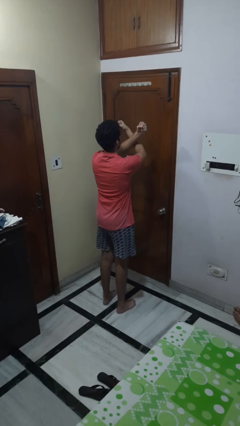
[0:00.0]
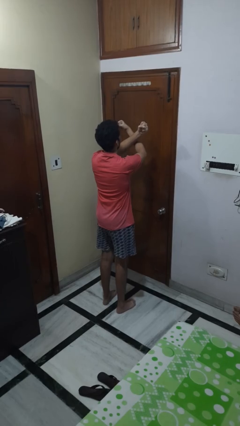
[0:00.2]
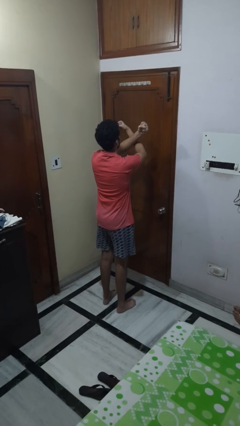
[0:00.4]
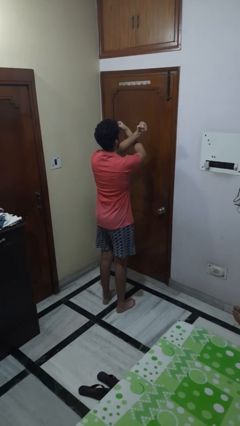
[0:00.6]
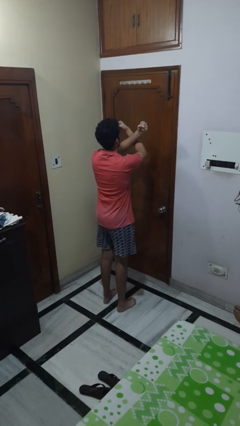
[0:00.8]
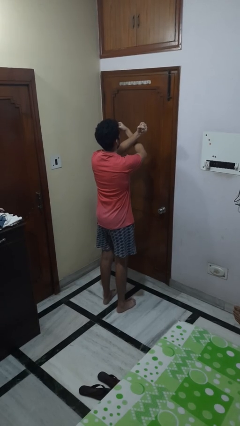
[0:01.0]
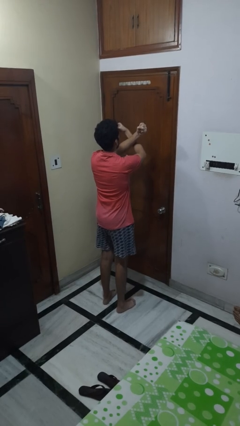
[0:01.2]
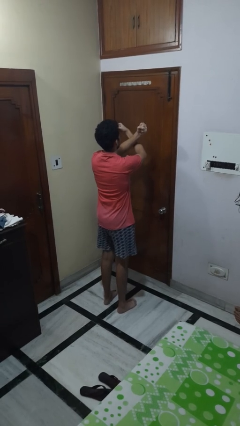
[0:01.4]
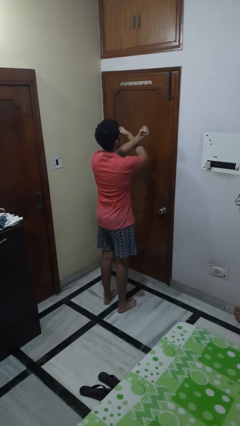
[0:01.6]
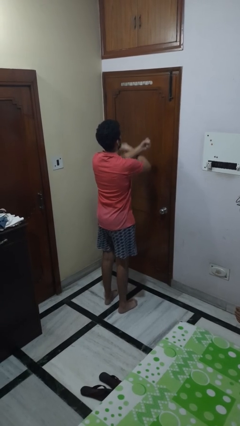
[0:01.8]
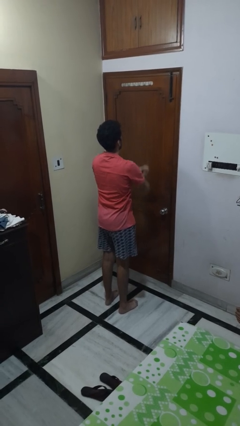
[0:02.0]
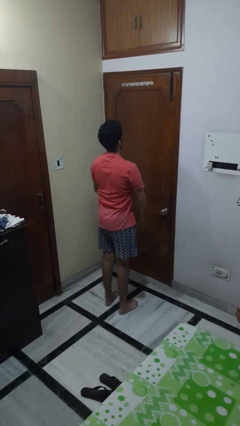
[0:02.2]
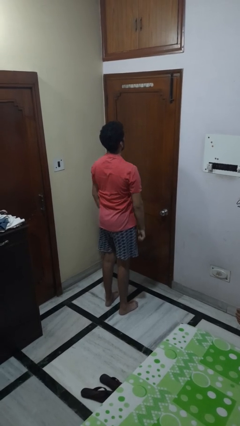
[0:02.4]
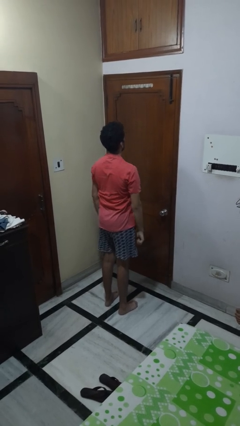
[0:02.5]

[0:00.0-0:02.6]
person gestures arms x

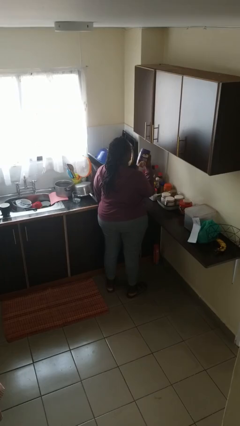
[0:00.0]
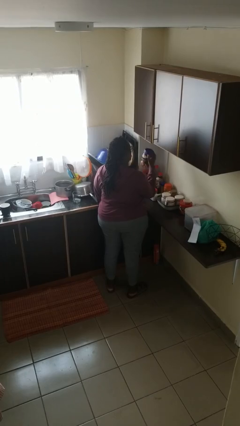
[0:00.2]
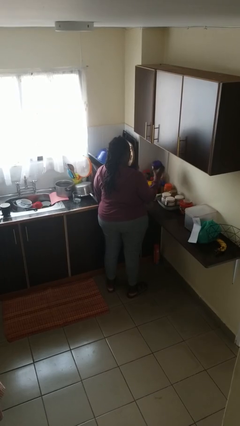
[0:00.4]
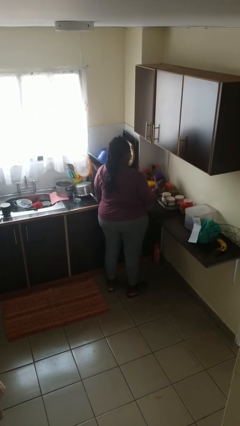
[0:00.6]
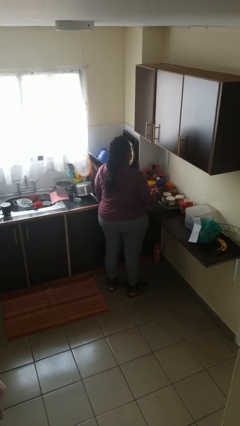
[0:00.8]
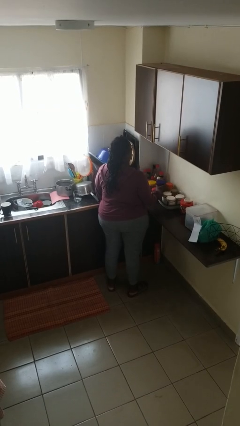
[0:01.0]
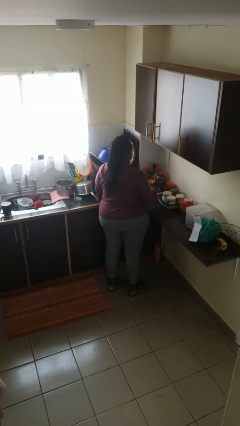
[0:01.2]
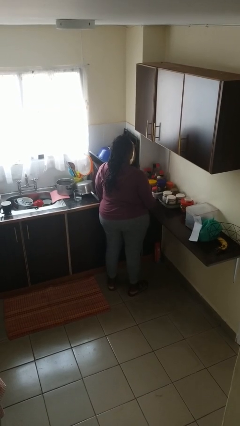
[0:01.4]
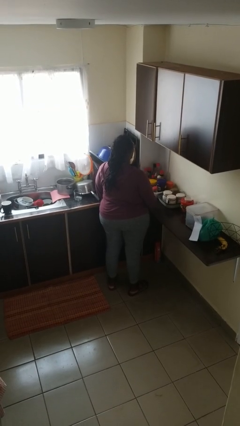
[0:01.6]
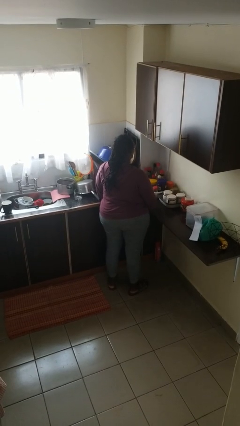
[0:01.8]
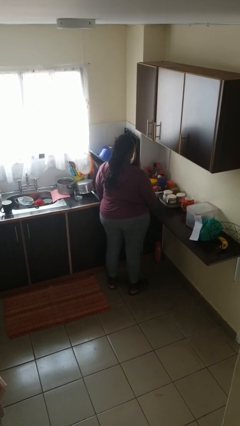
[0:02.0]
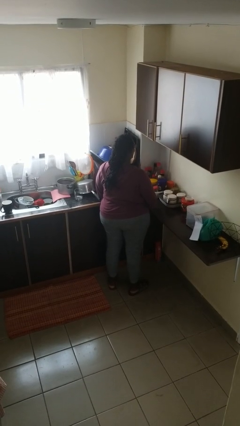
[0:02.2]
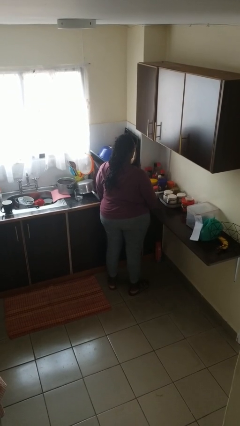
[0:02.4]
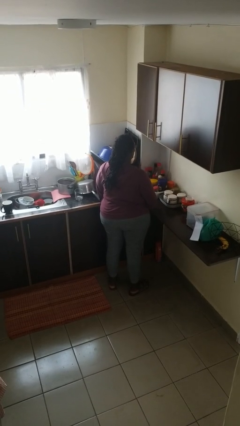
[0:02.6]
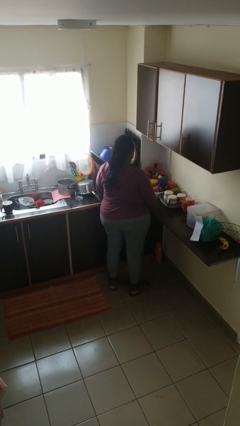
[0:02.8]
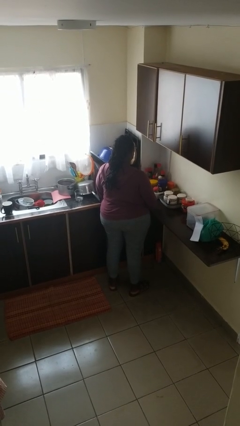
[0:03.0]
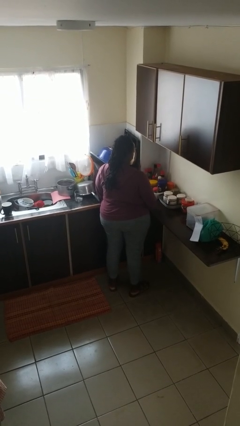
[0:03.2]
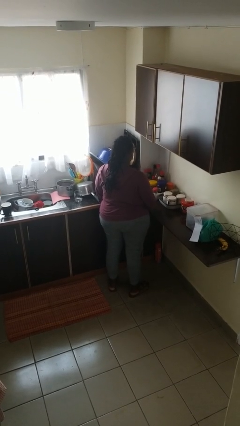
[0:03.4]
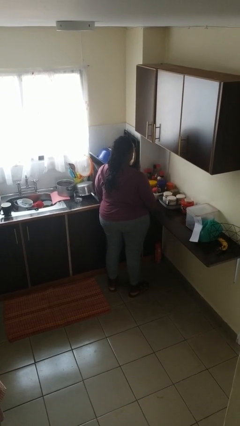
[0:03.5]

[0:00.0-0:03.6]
person puts down object on countertop

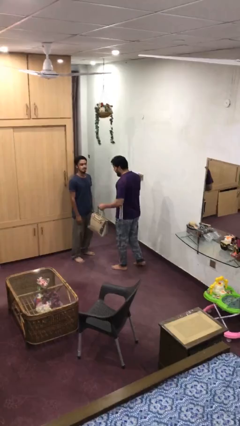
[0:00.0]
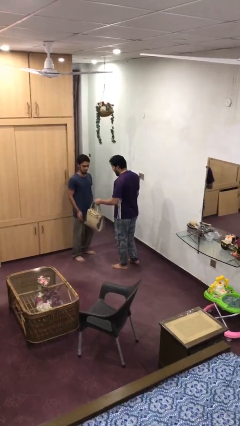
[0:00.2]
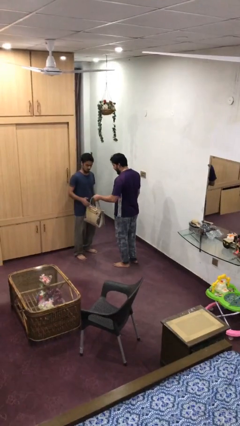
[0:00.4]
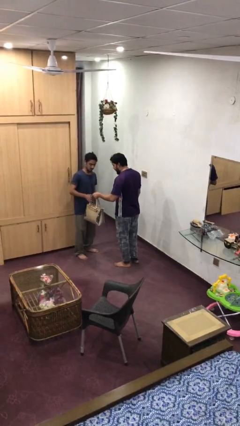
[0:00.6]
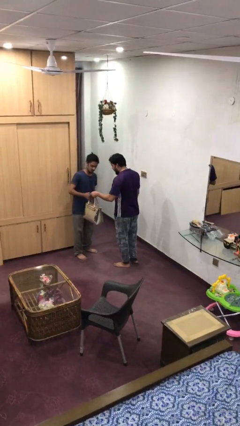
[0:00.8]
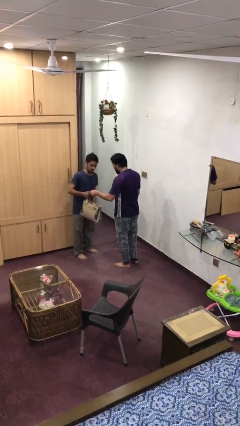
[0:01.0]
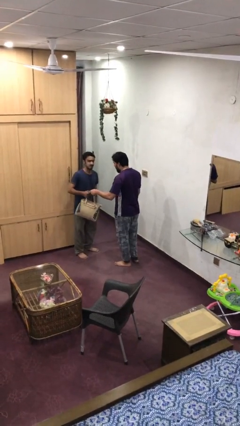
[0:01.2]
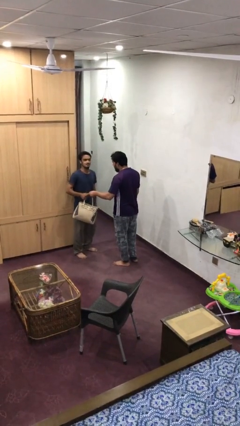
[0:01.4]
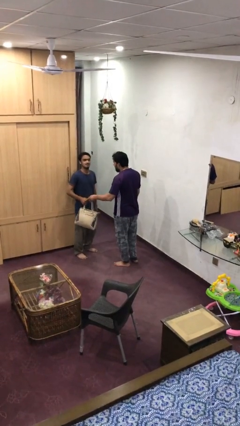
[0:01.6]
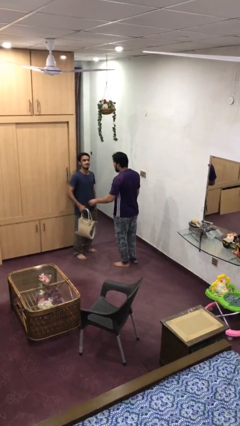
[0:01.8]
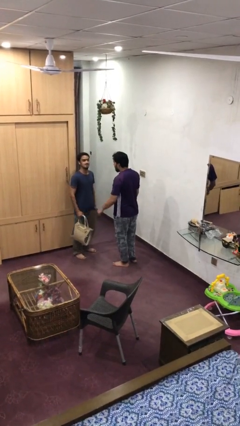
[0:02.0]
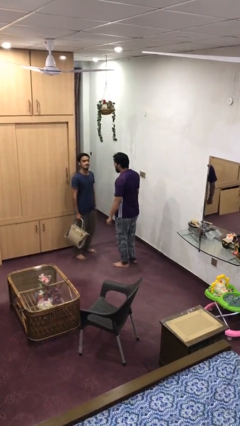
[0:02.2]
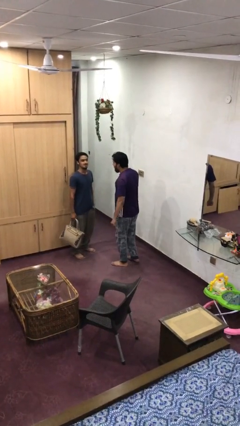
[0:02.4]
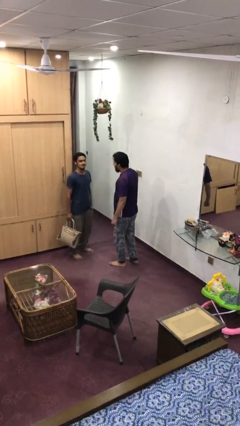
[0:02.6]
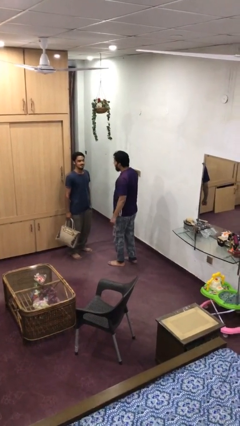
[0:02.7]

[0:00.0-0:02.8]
person transfers object to person

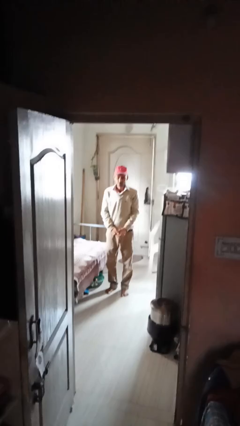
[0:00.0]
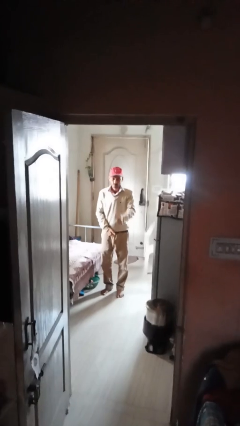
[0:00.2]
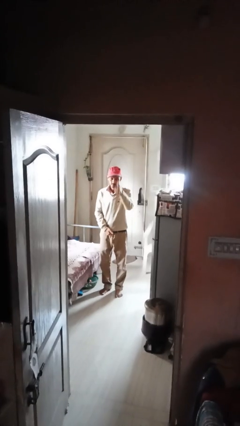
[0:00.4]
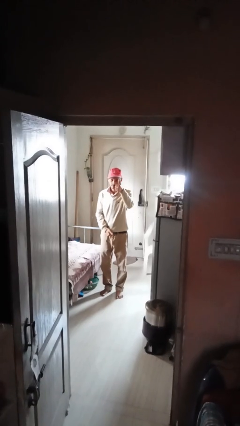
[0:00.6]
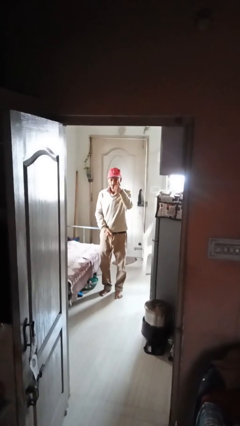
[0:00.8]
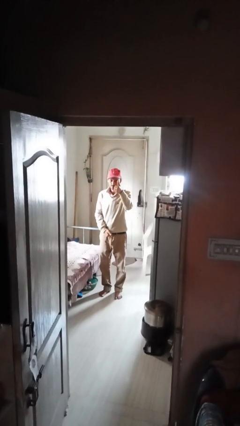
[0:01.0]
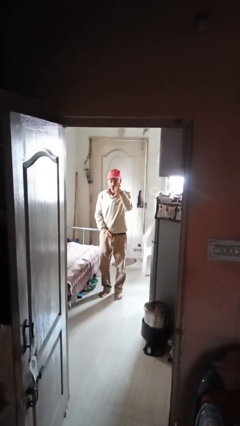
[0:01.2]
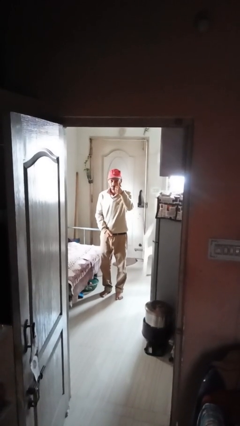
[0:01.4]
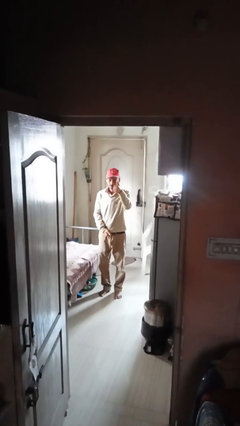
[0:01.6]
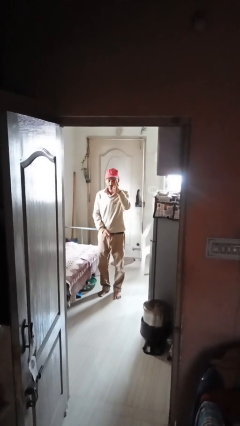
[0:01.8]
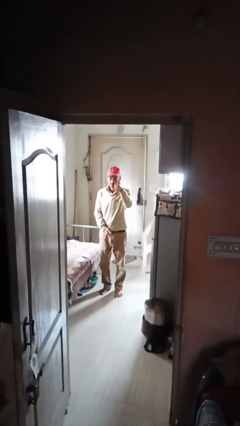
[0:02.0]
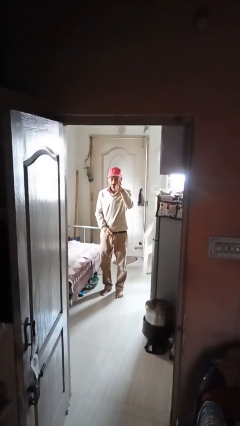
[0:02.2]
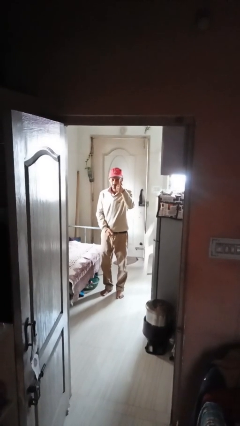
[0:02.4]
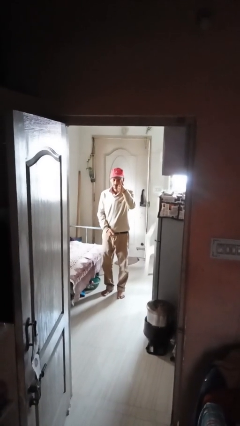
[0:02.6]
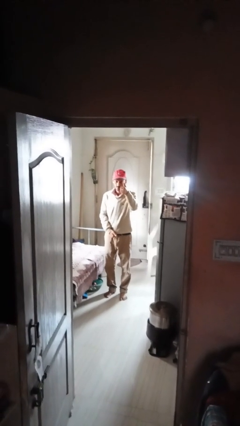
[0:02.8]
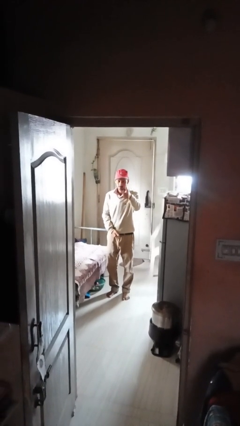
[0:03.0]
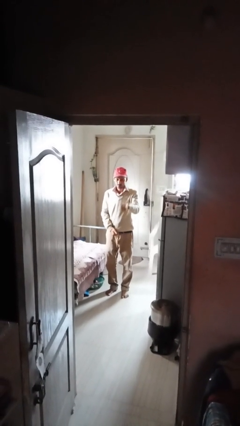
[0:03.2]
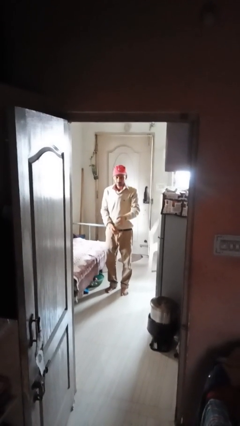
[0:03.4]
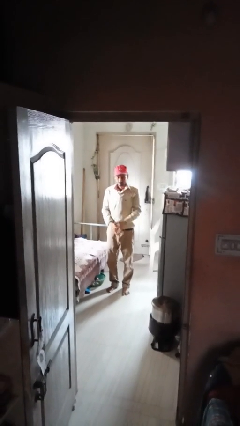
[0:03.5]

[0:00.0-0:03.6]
person gestures thumbs up

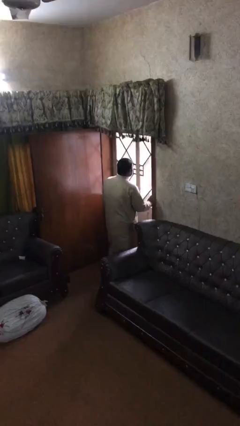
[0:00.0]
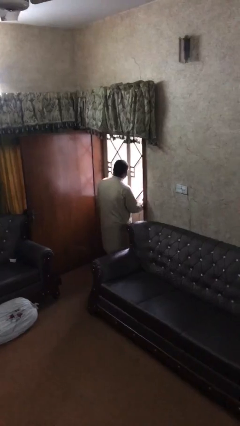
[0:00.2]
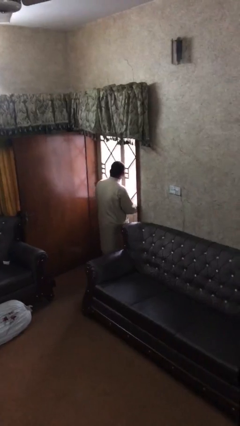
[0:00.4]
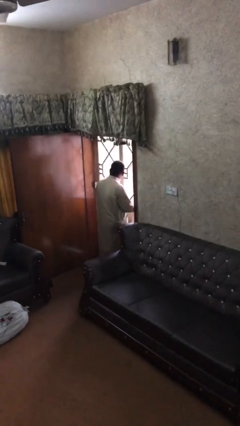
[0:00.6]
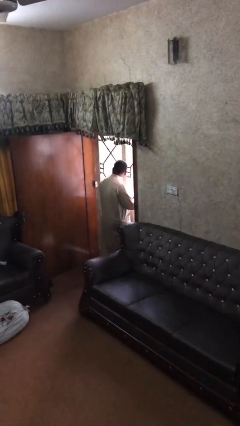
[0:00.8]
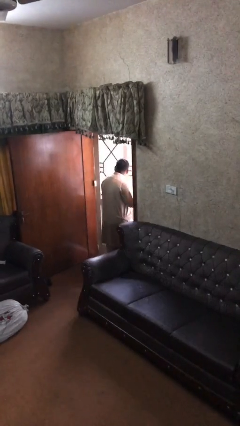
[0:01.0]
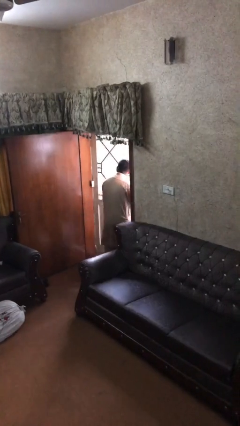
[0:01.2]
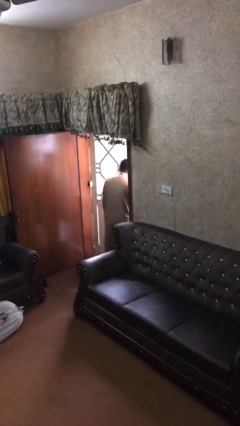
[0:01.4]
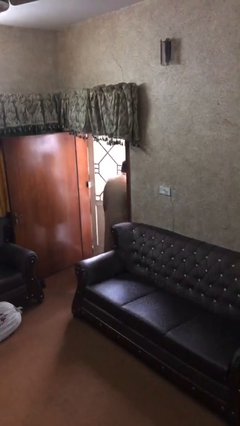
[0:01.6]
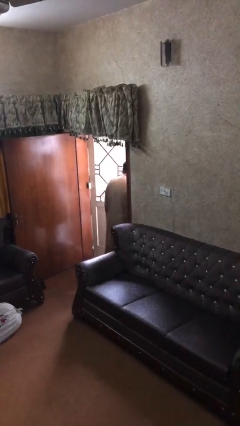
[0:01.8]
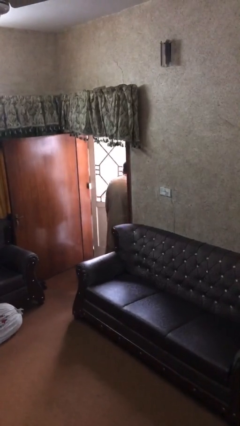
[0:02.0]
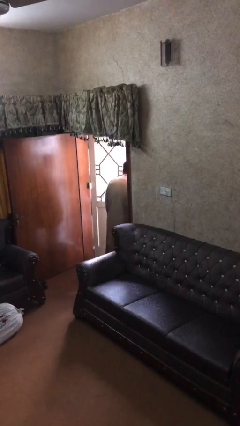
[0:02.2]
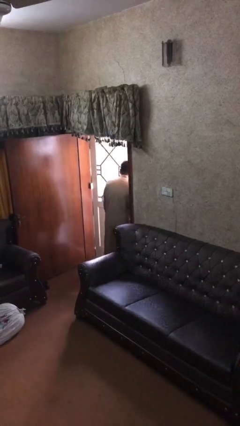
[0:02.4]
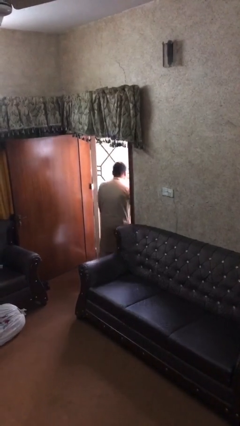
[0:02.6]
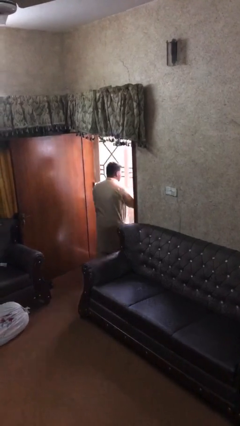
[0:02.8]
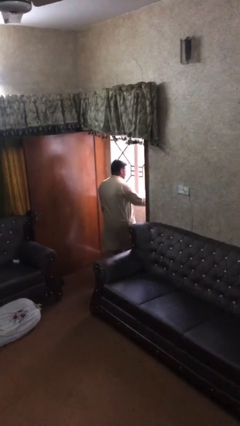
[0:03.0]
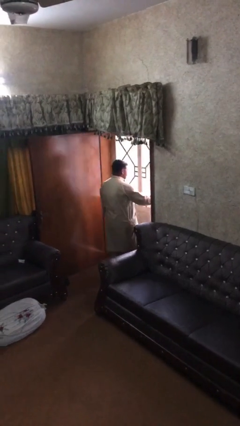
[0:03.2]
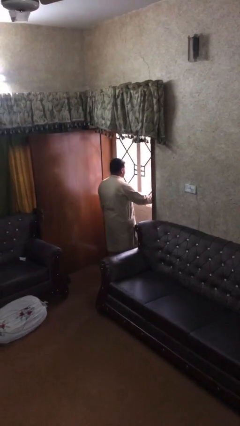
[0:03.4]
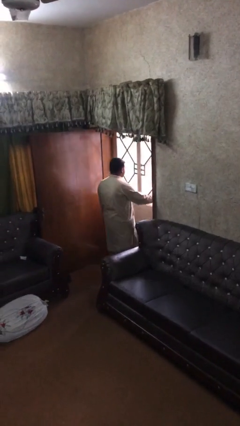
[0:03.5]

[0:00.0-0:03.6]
person opens facility door

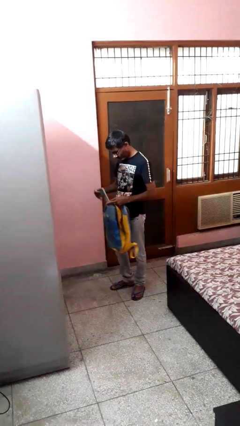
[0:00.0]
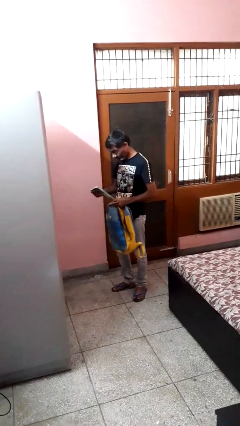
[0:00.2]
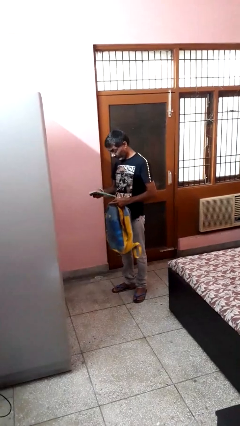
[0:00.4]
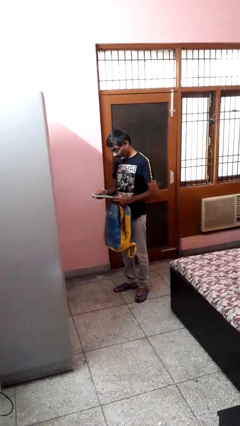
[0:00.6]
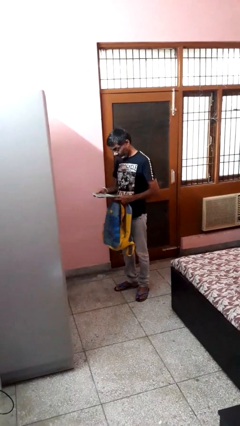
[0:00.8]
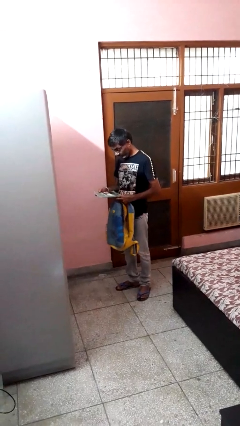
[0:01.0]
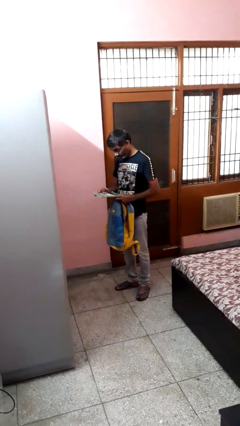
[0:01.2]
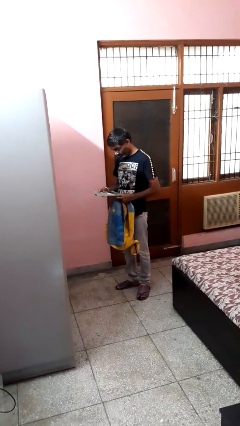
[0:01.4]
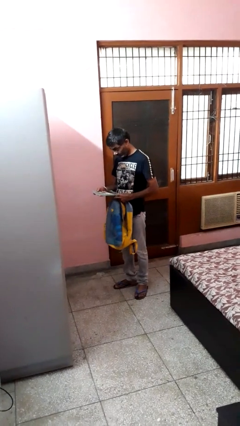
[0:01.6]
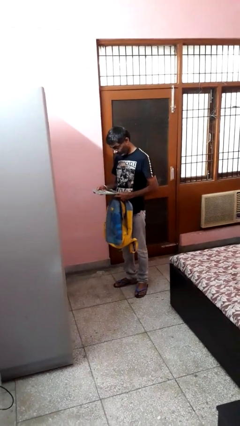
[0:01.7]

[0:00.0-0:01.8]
person takes object from backpack
